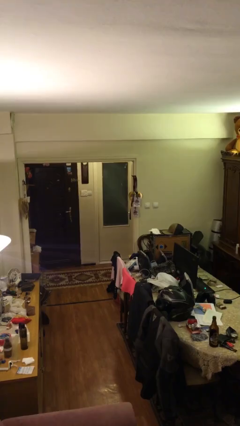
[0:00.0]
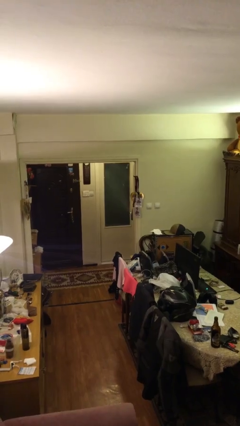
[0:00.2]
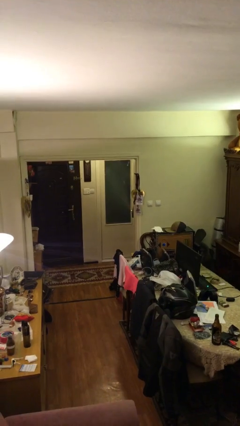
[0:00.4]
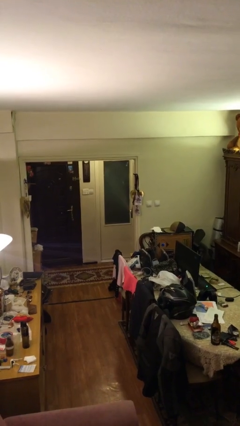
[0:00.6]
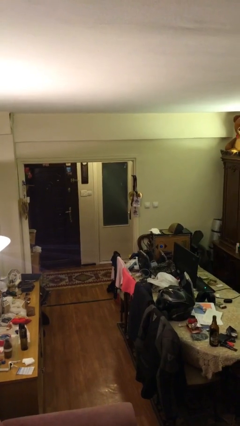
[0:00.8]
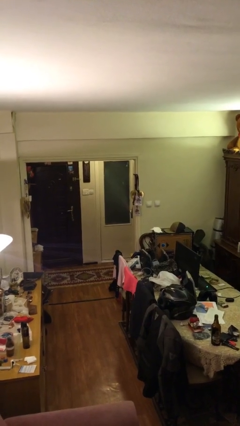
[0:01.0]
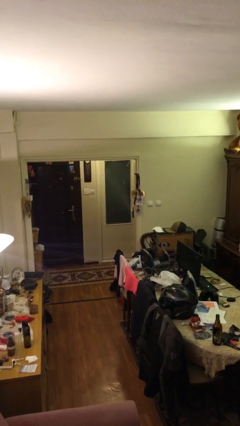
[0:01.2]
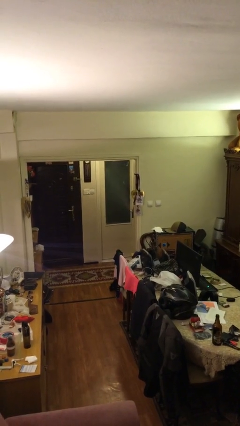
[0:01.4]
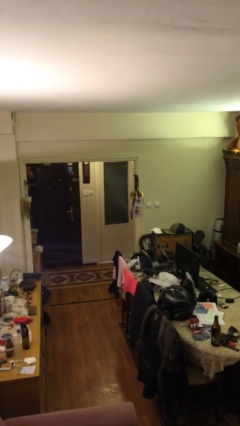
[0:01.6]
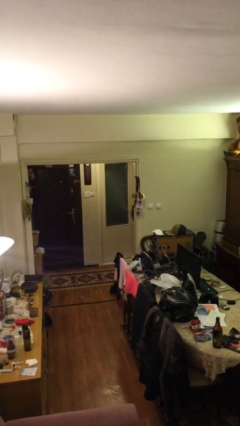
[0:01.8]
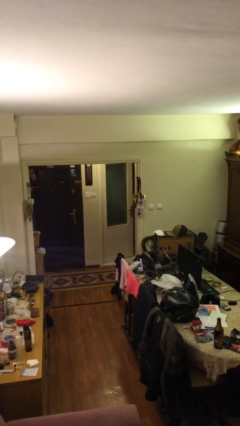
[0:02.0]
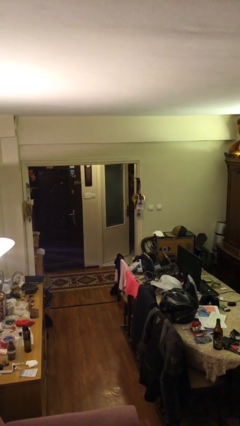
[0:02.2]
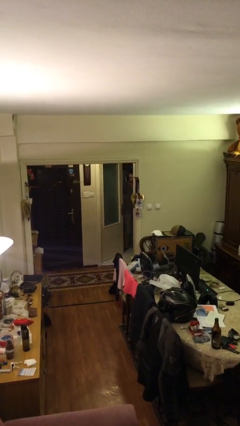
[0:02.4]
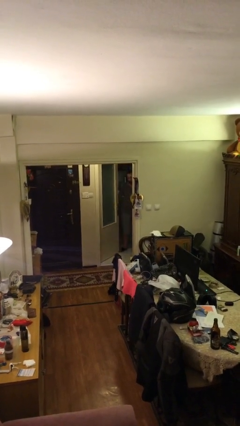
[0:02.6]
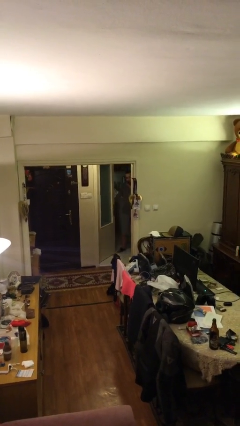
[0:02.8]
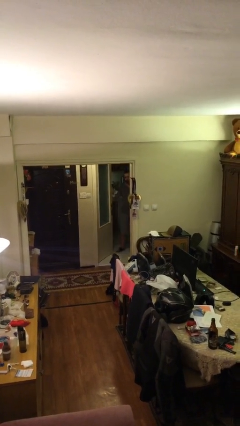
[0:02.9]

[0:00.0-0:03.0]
person opens facility door

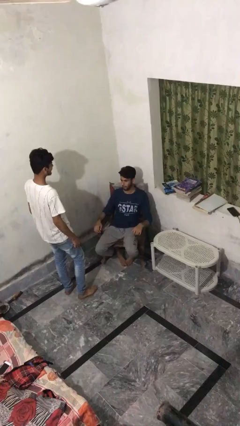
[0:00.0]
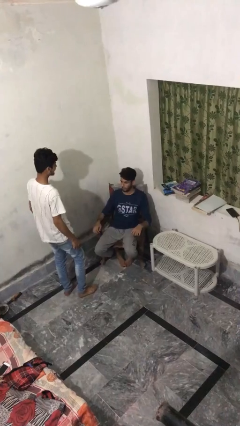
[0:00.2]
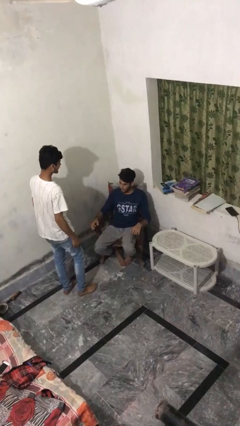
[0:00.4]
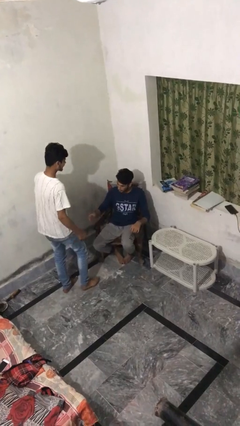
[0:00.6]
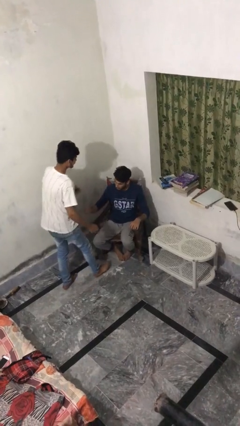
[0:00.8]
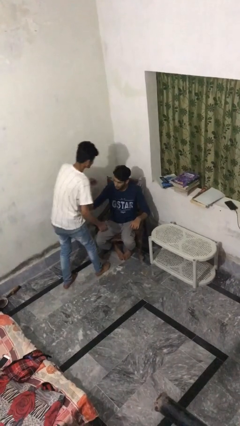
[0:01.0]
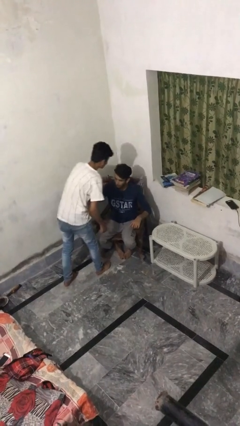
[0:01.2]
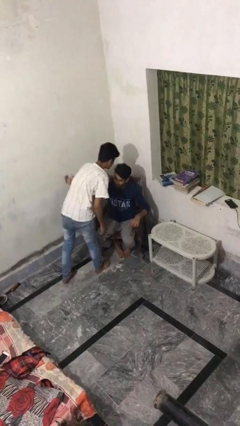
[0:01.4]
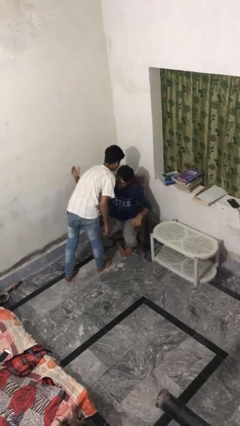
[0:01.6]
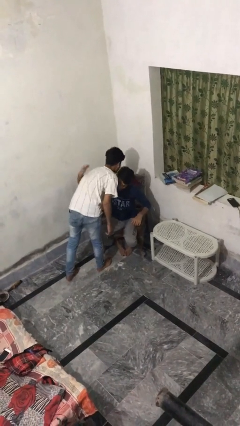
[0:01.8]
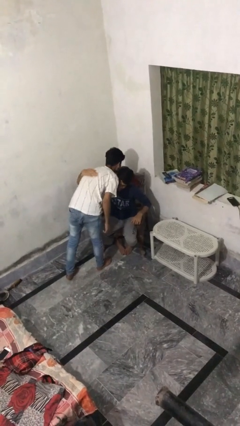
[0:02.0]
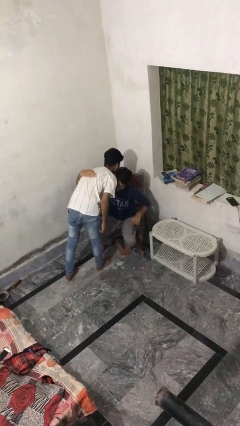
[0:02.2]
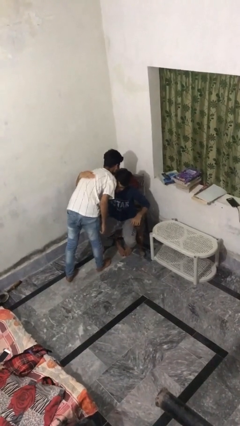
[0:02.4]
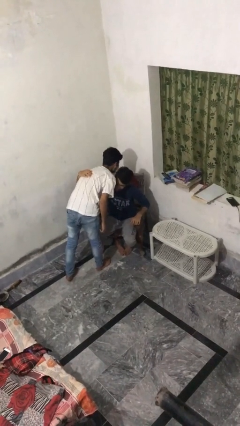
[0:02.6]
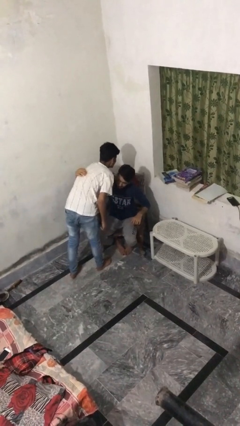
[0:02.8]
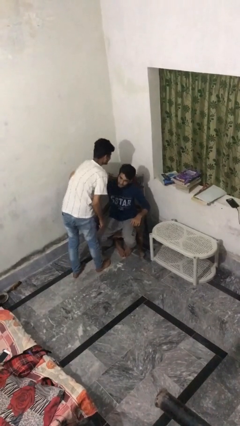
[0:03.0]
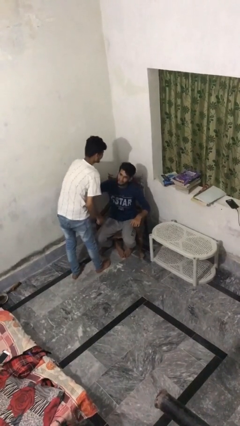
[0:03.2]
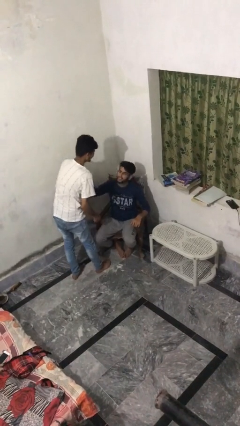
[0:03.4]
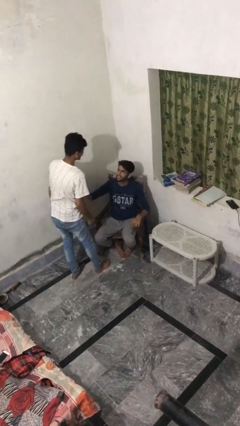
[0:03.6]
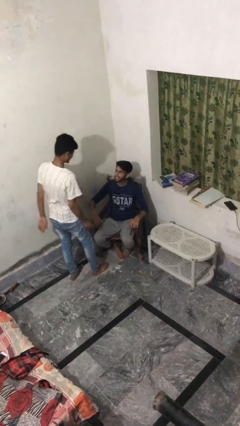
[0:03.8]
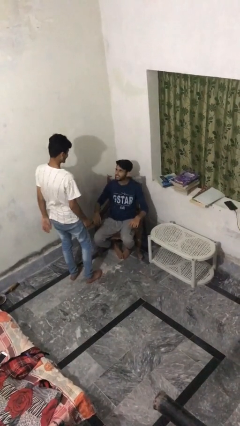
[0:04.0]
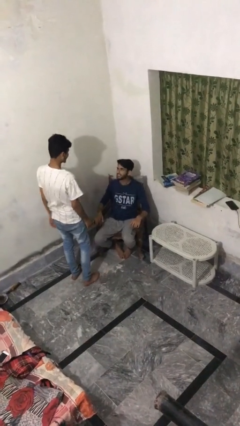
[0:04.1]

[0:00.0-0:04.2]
person embraces person

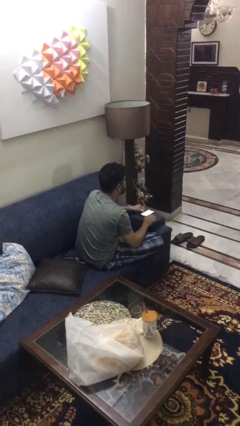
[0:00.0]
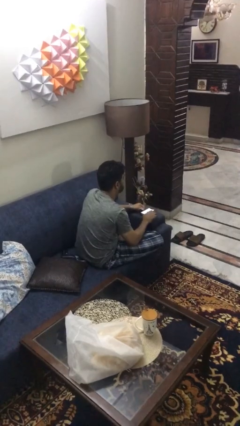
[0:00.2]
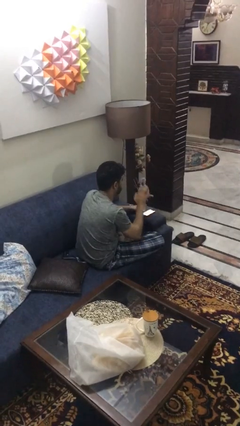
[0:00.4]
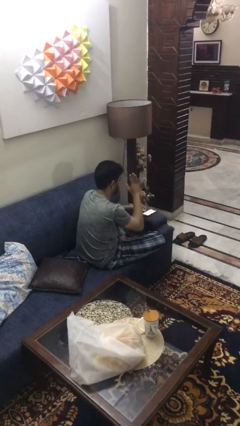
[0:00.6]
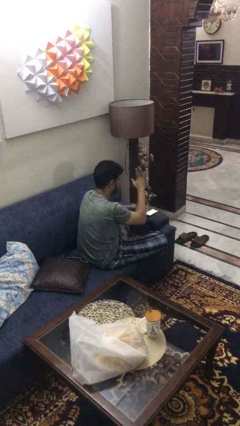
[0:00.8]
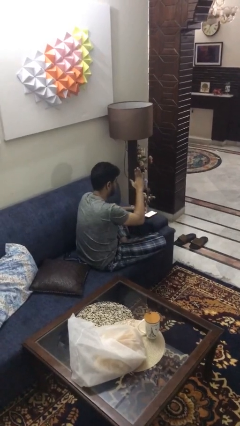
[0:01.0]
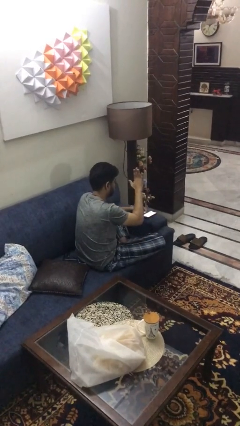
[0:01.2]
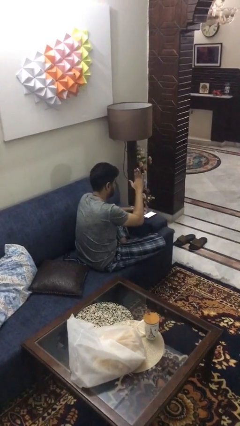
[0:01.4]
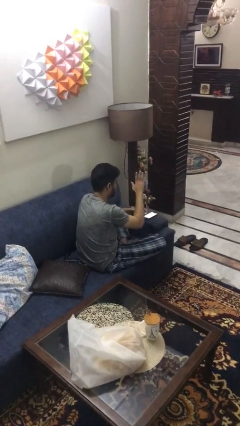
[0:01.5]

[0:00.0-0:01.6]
person gestures stop

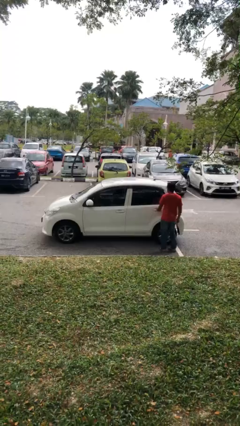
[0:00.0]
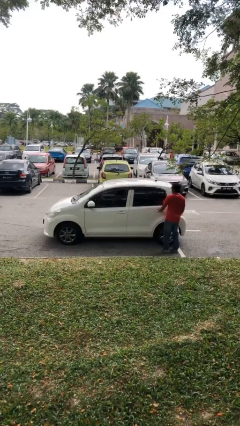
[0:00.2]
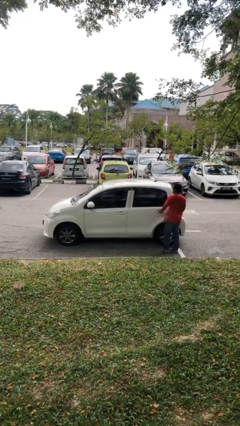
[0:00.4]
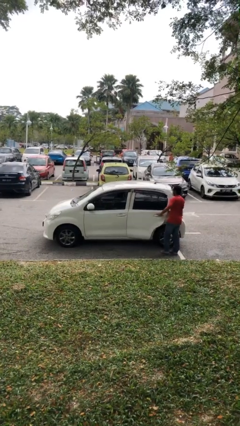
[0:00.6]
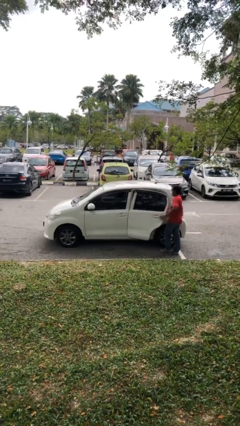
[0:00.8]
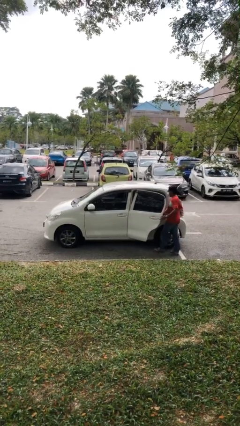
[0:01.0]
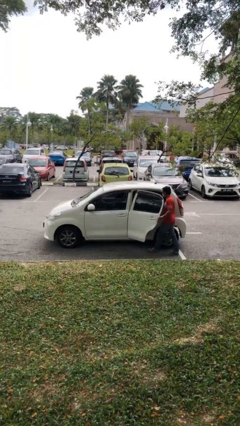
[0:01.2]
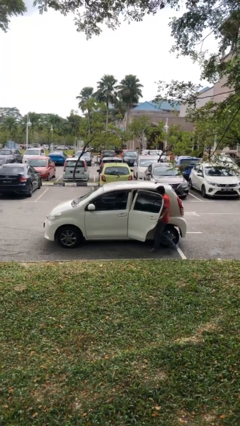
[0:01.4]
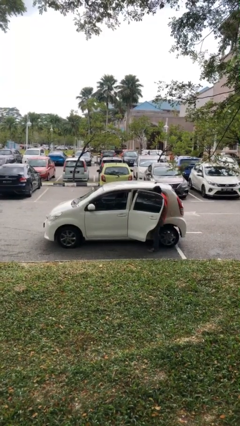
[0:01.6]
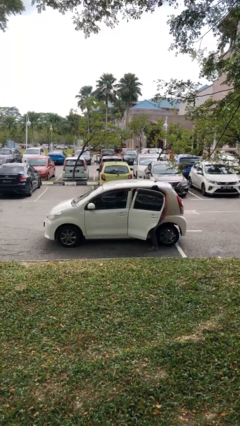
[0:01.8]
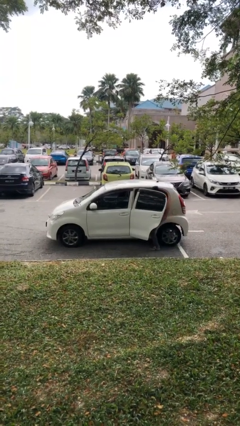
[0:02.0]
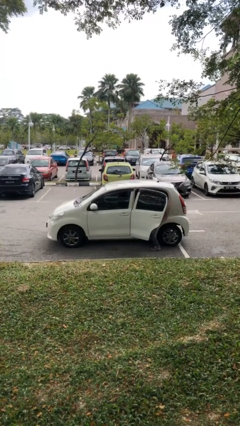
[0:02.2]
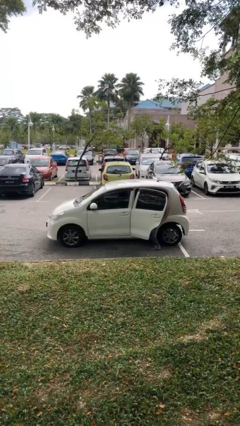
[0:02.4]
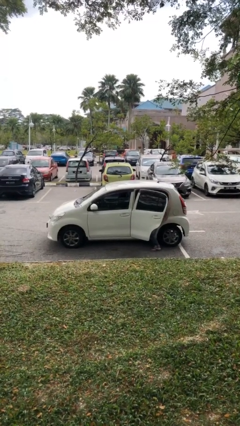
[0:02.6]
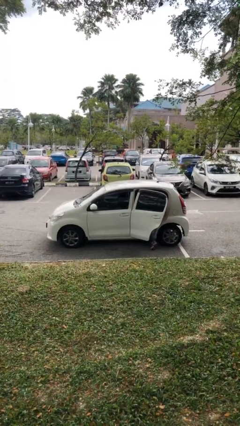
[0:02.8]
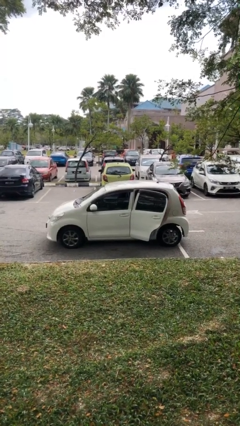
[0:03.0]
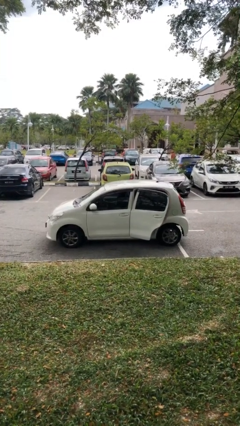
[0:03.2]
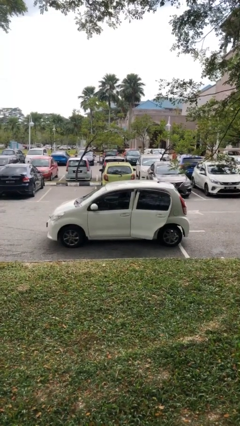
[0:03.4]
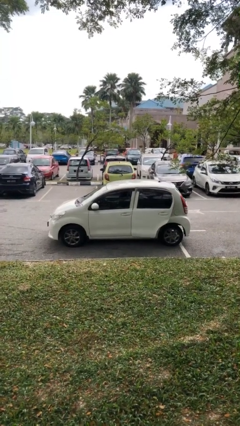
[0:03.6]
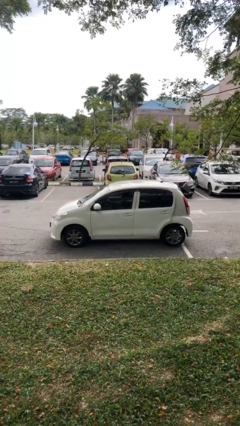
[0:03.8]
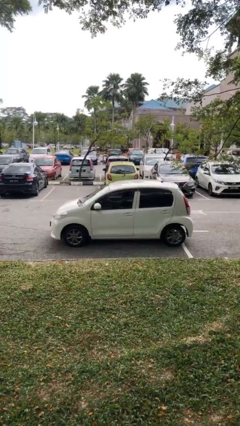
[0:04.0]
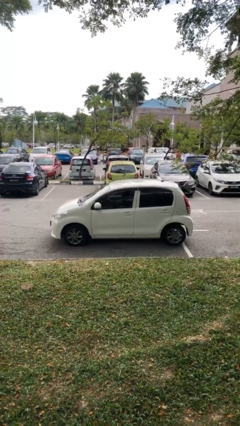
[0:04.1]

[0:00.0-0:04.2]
car picks up person

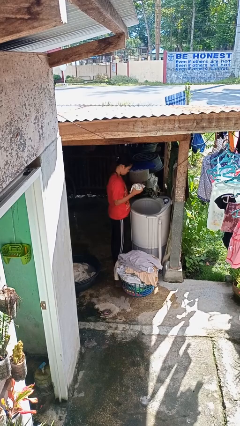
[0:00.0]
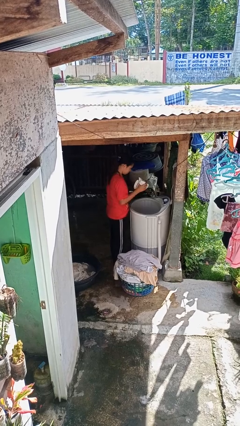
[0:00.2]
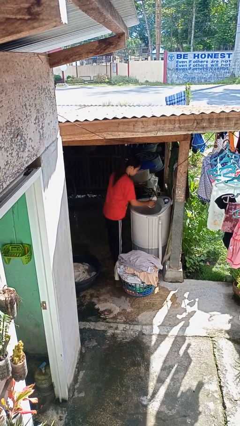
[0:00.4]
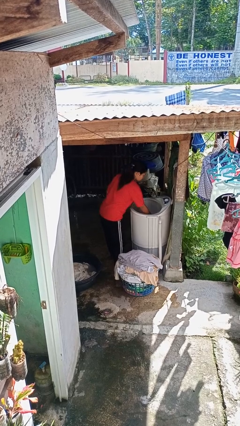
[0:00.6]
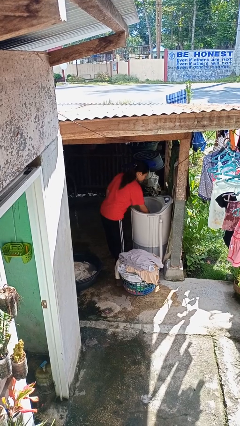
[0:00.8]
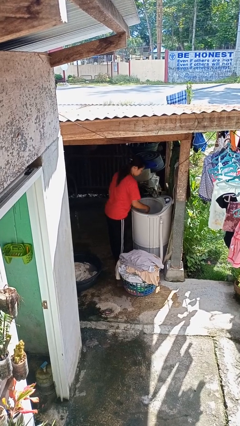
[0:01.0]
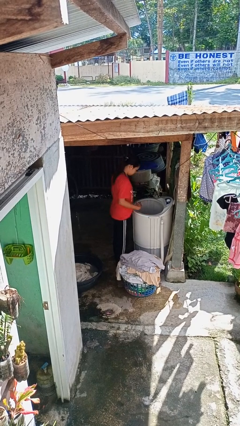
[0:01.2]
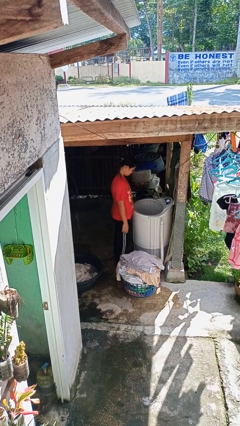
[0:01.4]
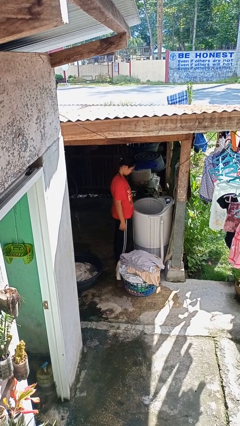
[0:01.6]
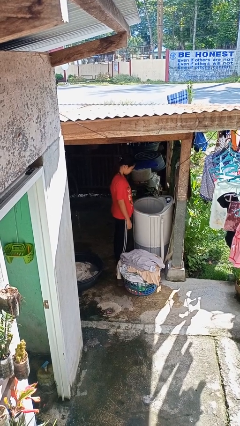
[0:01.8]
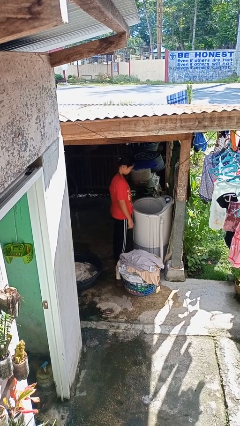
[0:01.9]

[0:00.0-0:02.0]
person loads clotheswasher

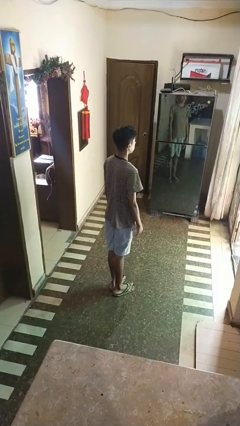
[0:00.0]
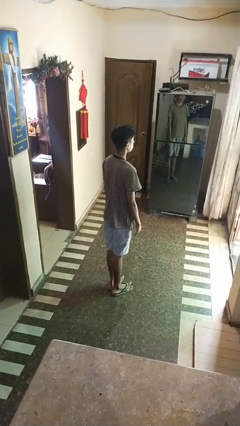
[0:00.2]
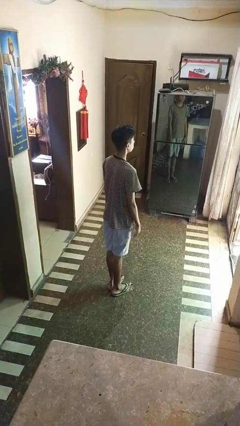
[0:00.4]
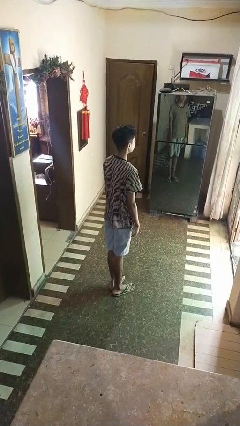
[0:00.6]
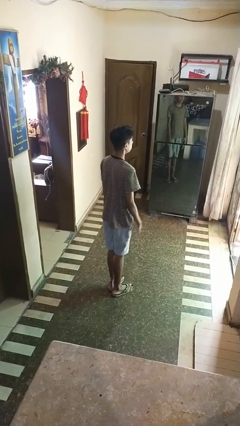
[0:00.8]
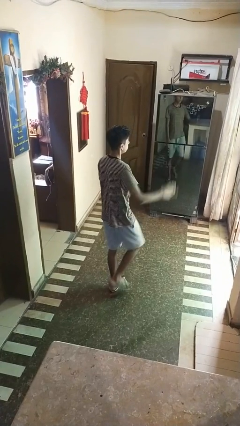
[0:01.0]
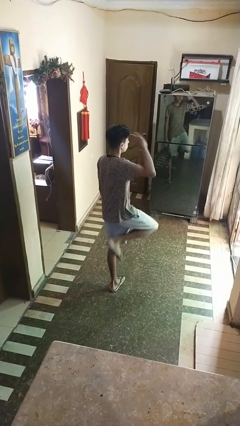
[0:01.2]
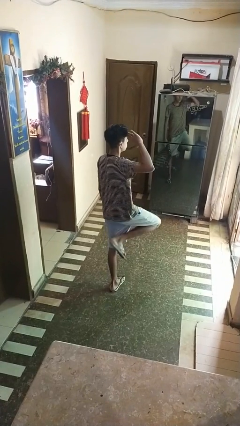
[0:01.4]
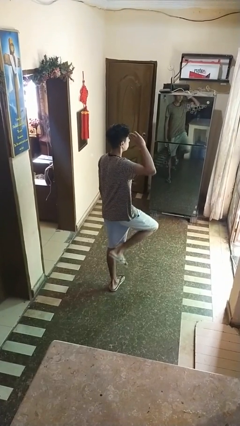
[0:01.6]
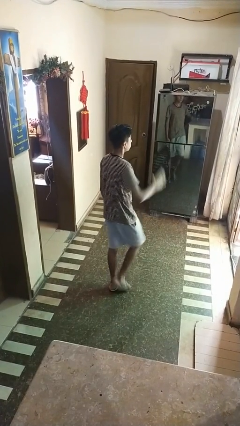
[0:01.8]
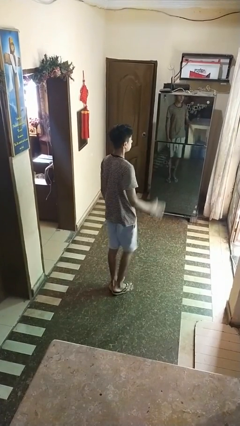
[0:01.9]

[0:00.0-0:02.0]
person salutes

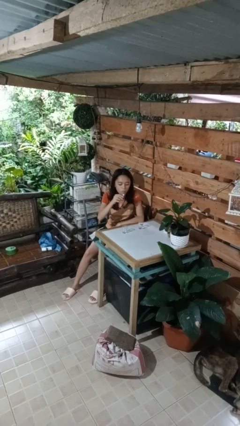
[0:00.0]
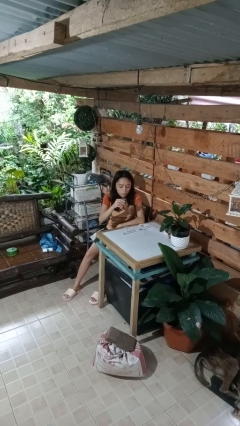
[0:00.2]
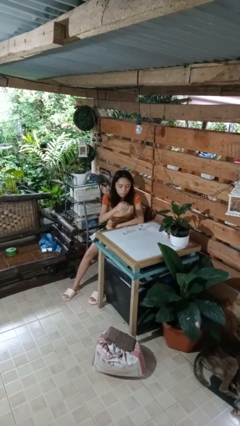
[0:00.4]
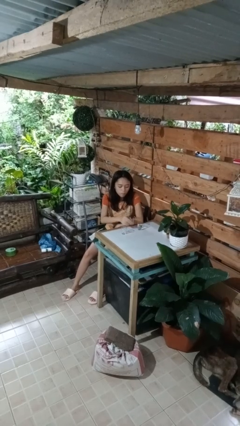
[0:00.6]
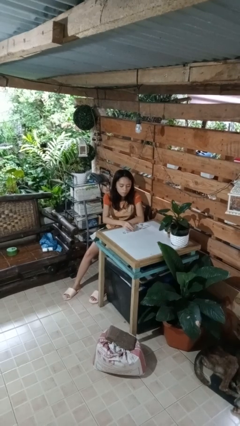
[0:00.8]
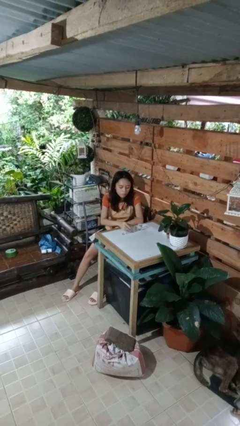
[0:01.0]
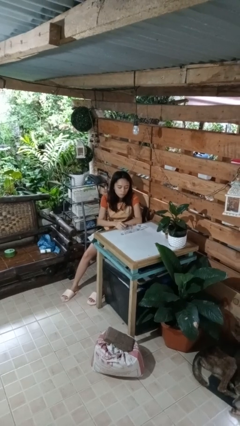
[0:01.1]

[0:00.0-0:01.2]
person puts down object on table
